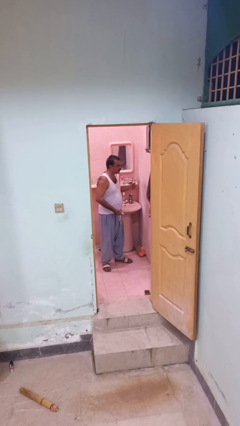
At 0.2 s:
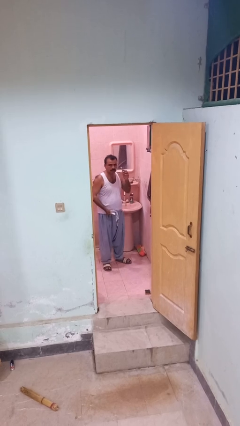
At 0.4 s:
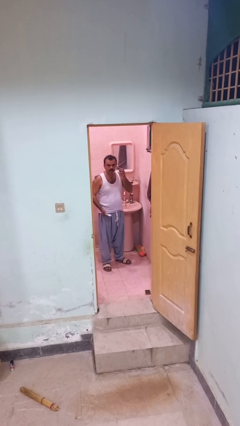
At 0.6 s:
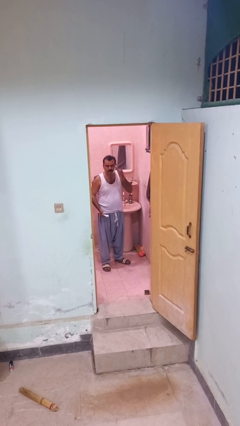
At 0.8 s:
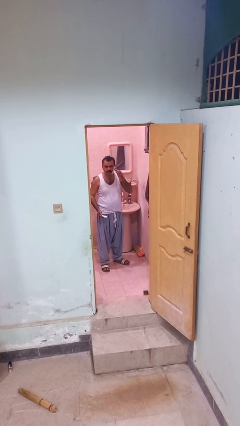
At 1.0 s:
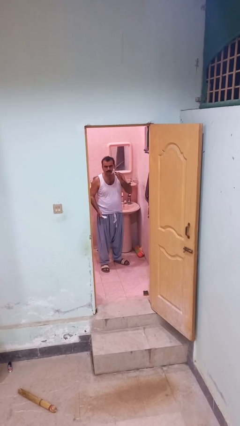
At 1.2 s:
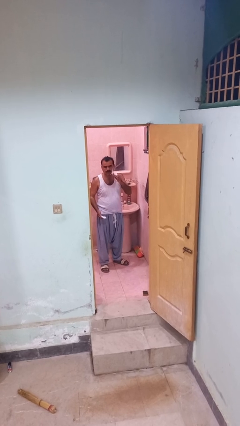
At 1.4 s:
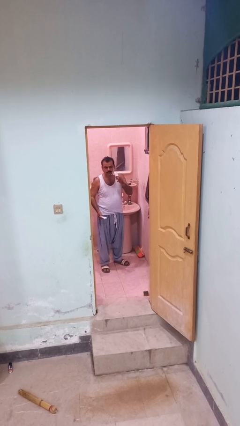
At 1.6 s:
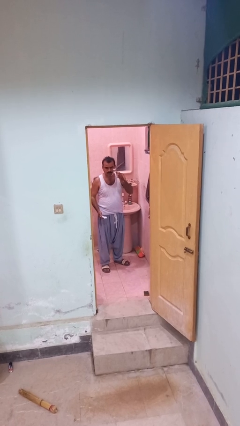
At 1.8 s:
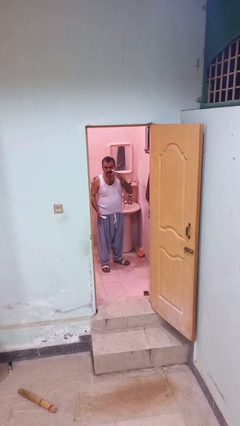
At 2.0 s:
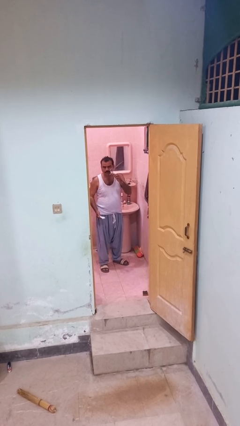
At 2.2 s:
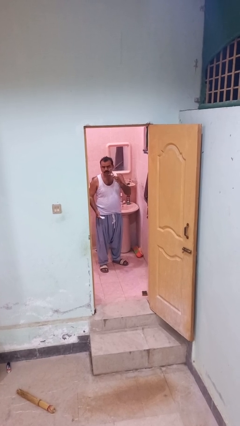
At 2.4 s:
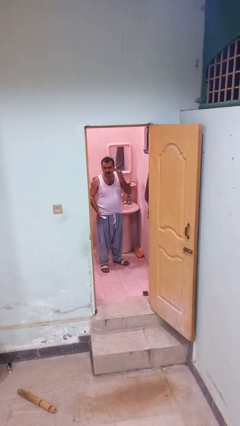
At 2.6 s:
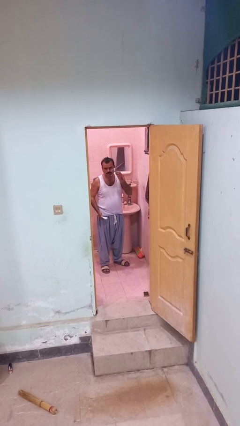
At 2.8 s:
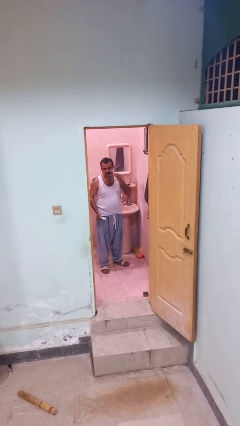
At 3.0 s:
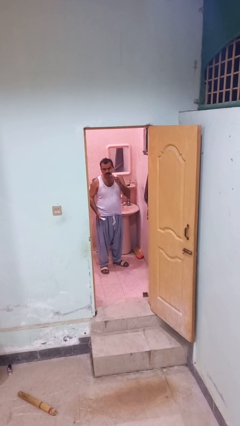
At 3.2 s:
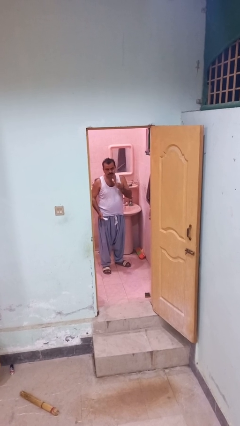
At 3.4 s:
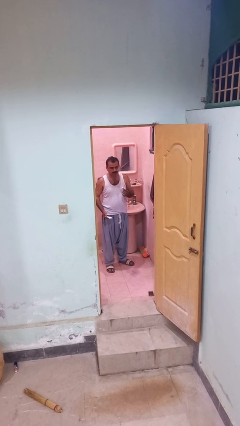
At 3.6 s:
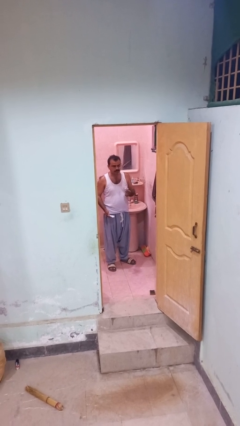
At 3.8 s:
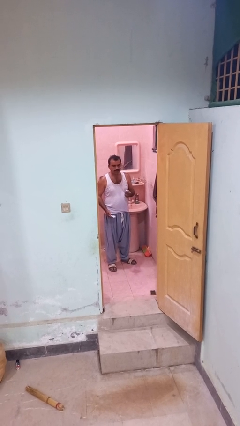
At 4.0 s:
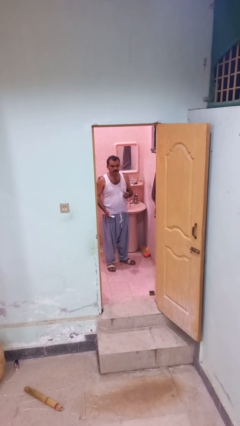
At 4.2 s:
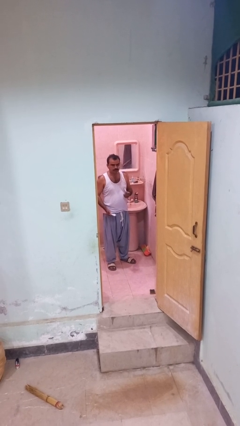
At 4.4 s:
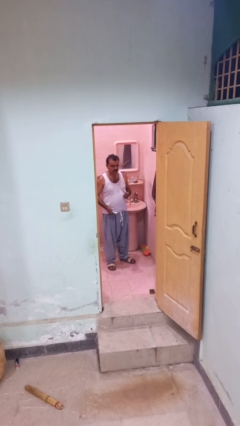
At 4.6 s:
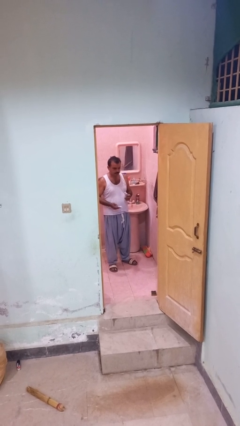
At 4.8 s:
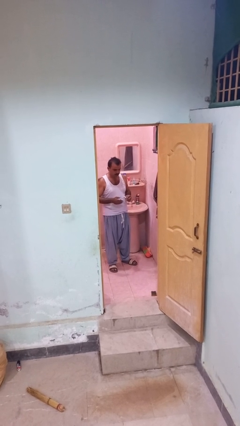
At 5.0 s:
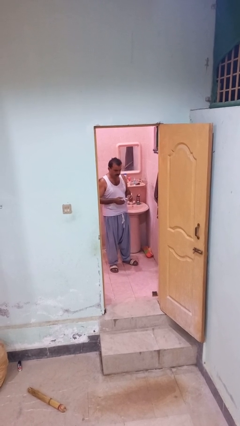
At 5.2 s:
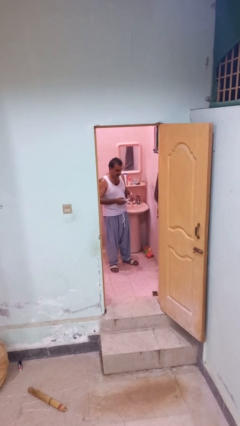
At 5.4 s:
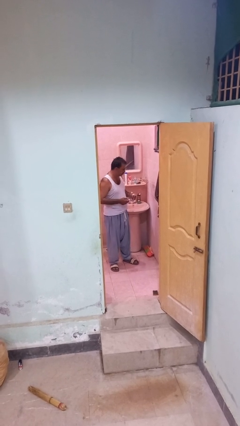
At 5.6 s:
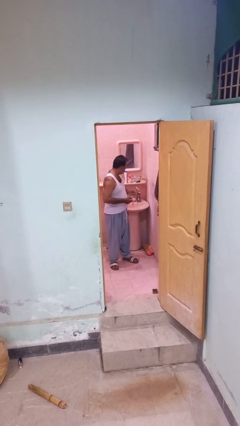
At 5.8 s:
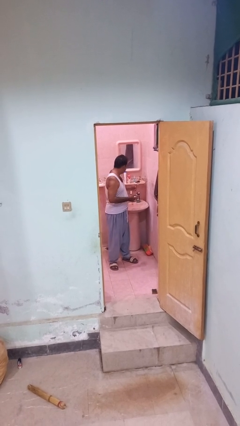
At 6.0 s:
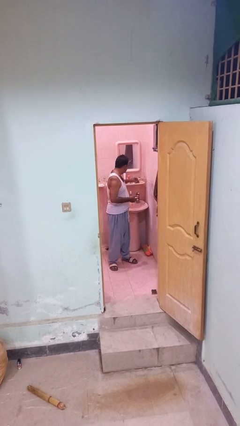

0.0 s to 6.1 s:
person shaves face

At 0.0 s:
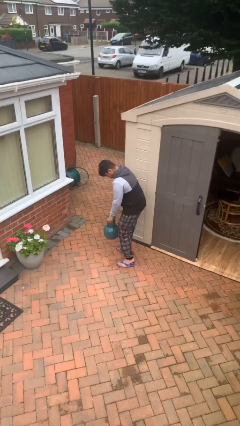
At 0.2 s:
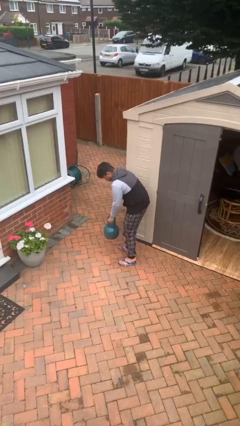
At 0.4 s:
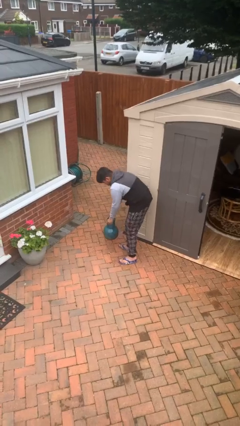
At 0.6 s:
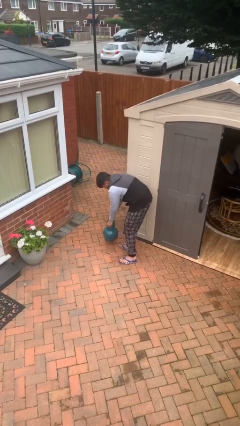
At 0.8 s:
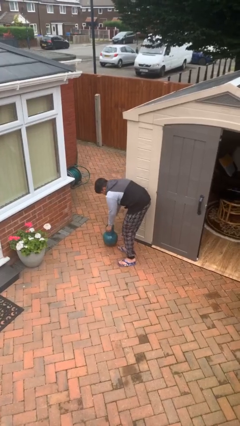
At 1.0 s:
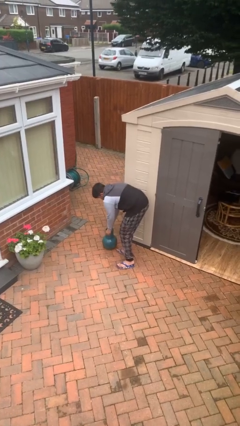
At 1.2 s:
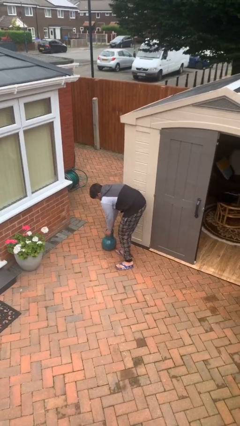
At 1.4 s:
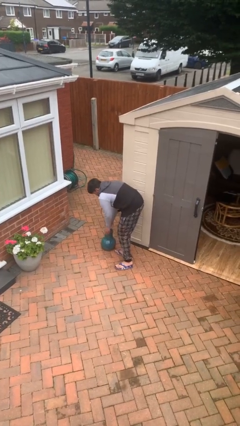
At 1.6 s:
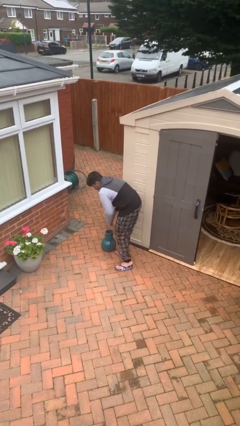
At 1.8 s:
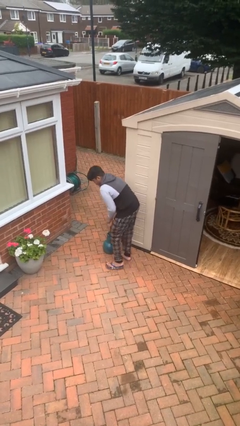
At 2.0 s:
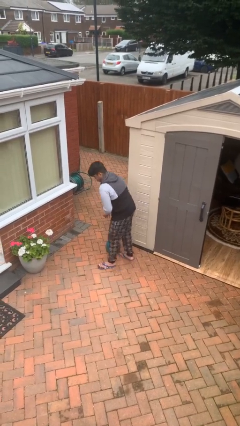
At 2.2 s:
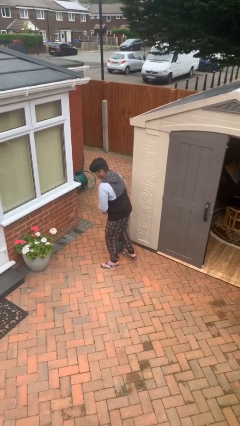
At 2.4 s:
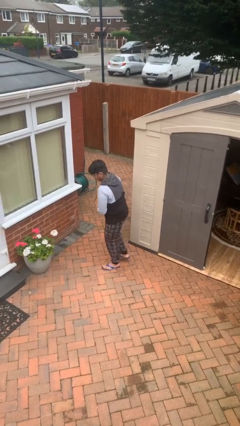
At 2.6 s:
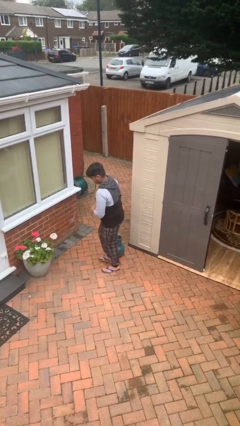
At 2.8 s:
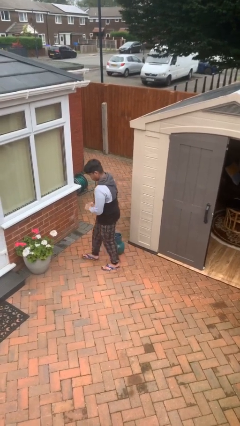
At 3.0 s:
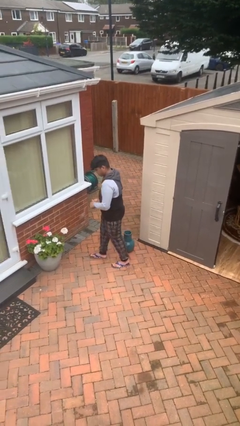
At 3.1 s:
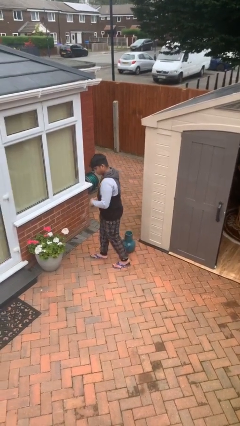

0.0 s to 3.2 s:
person puts down object on floor

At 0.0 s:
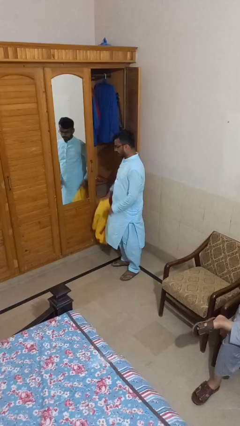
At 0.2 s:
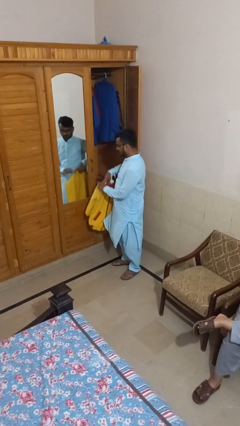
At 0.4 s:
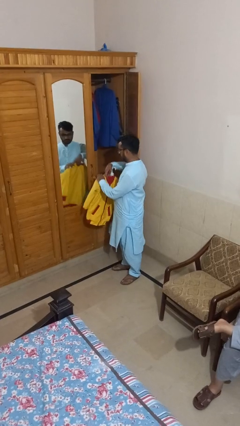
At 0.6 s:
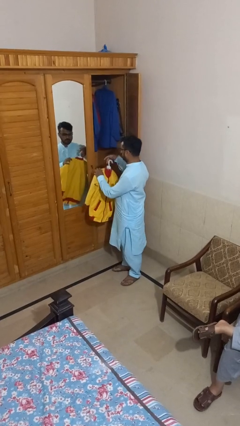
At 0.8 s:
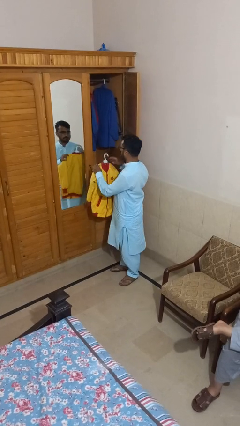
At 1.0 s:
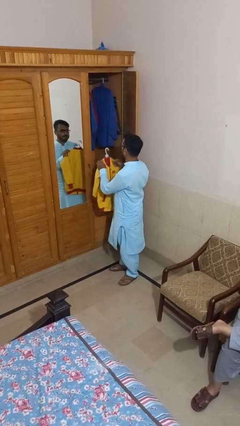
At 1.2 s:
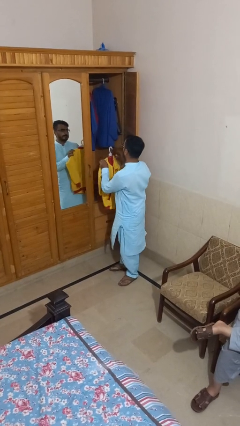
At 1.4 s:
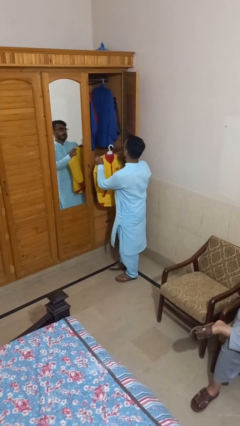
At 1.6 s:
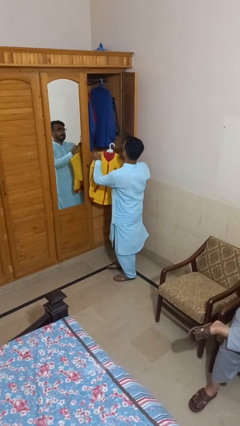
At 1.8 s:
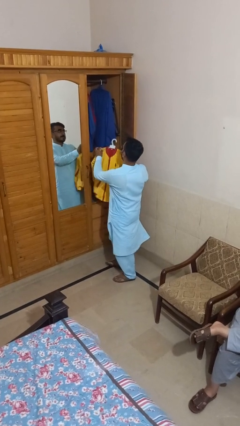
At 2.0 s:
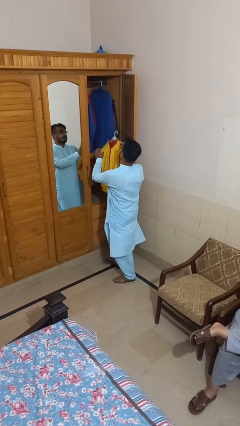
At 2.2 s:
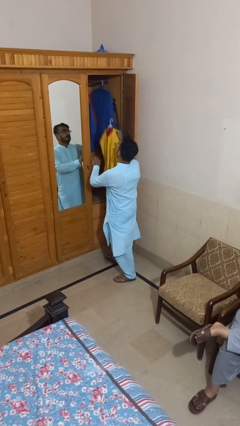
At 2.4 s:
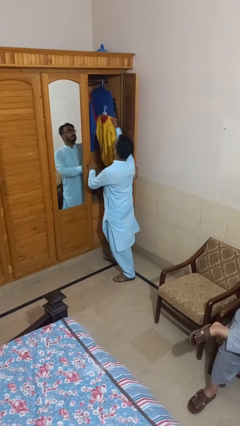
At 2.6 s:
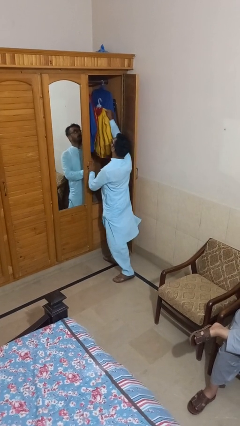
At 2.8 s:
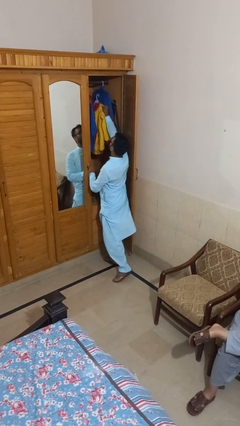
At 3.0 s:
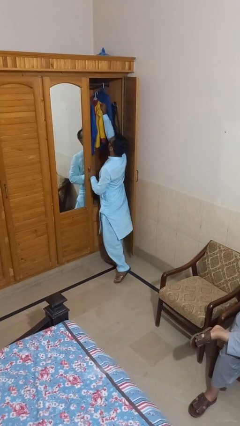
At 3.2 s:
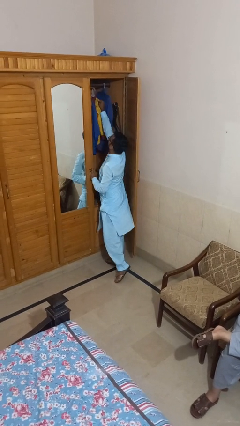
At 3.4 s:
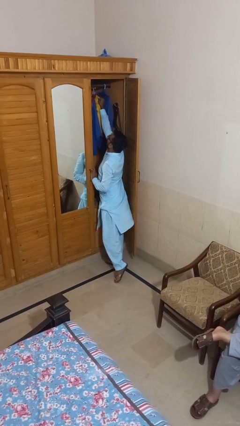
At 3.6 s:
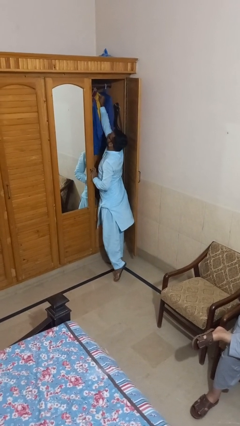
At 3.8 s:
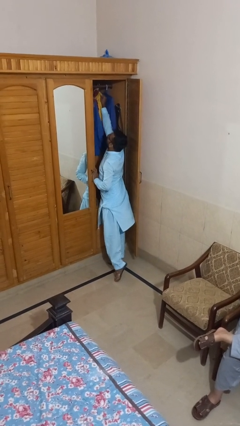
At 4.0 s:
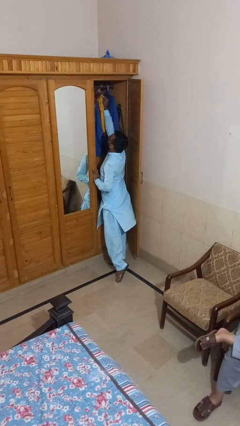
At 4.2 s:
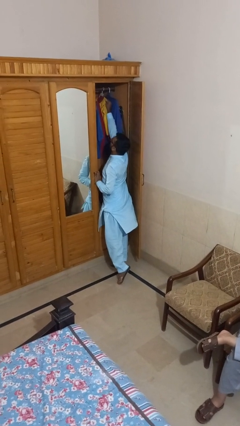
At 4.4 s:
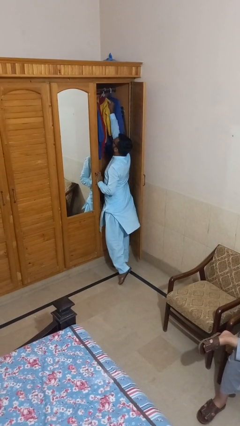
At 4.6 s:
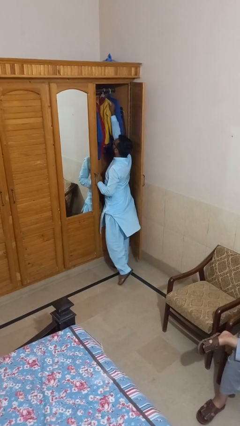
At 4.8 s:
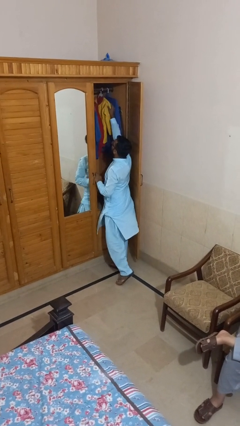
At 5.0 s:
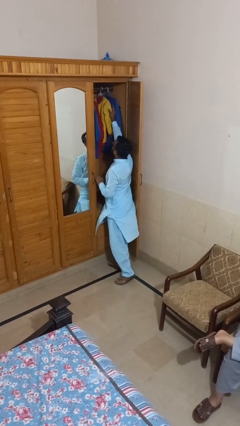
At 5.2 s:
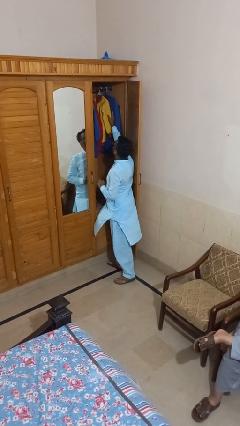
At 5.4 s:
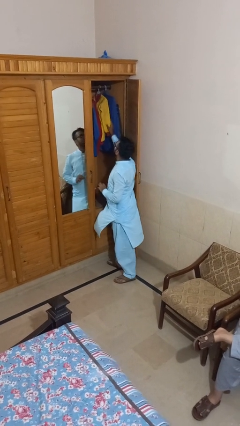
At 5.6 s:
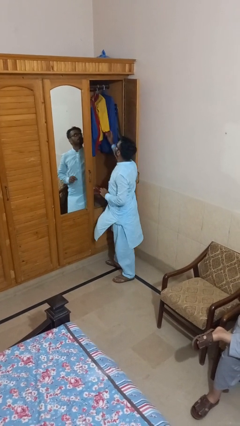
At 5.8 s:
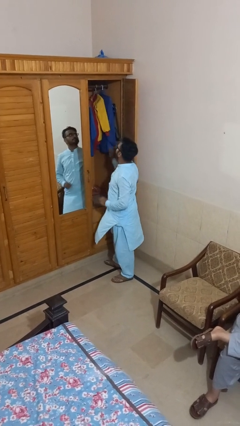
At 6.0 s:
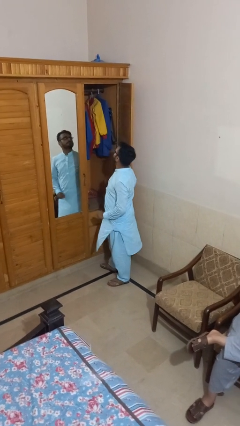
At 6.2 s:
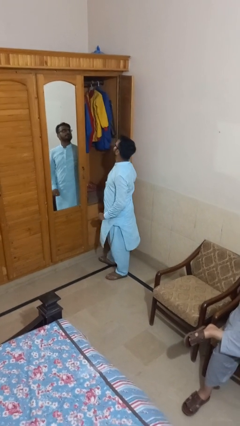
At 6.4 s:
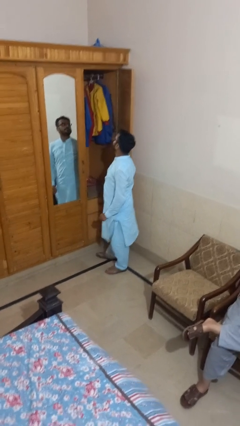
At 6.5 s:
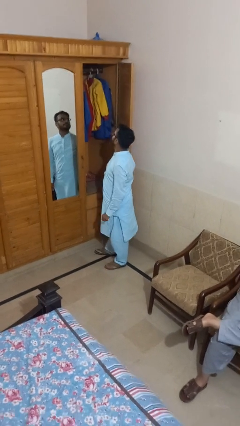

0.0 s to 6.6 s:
person puts clothes into closet

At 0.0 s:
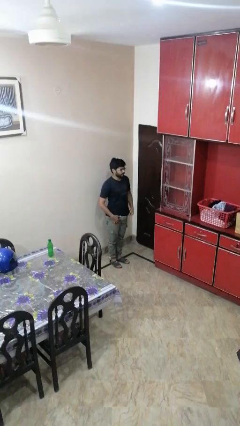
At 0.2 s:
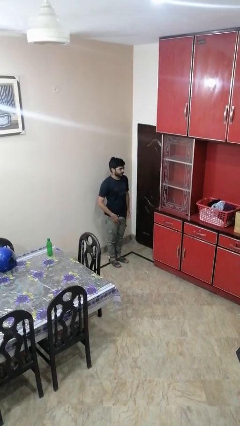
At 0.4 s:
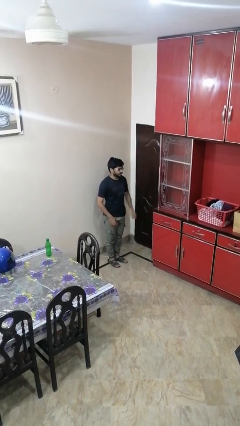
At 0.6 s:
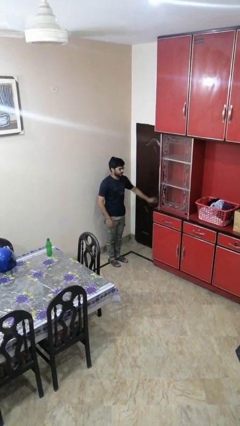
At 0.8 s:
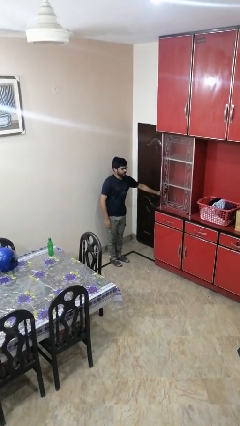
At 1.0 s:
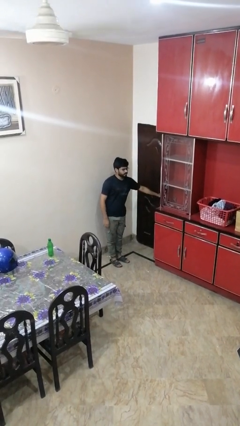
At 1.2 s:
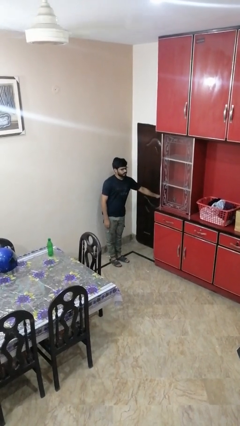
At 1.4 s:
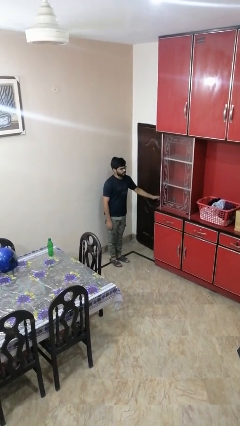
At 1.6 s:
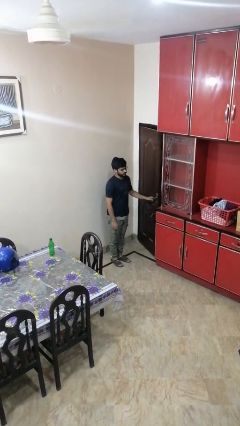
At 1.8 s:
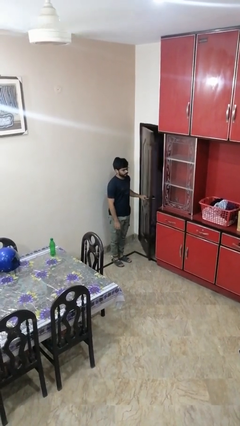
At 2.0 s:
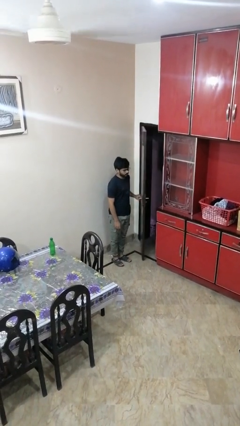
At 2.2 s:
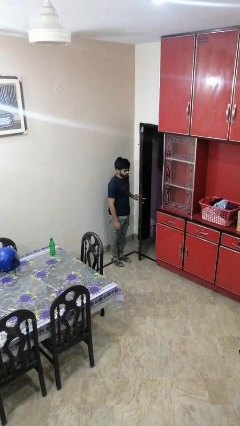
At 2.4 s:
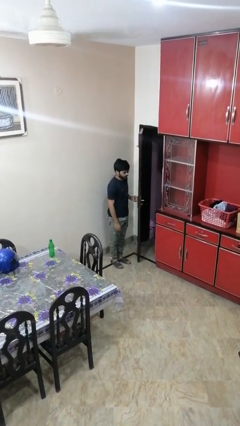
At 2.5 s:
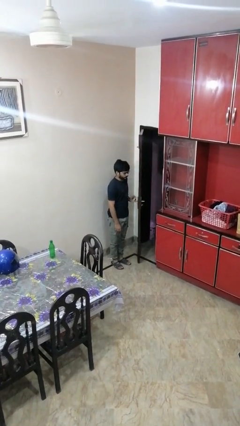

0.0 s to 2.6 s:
person opens facility door
